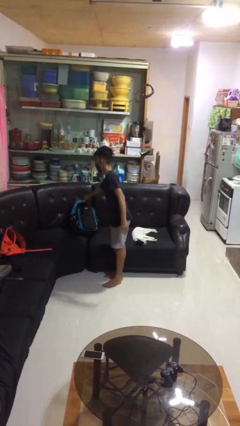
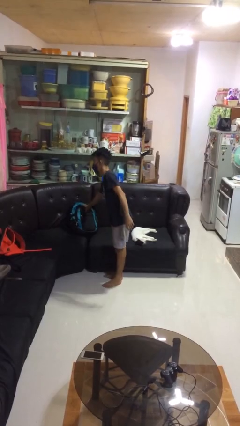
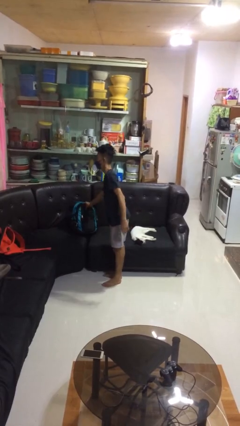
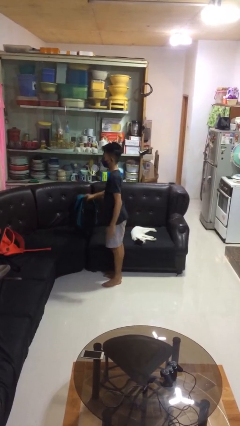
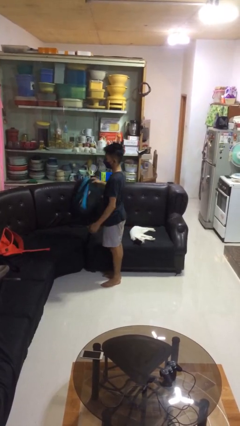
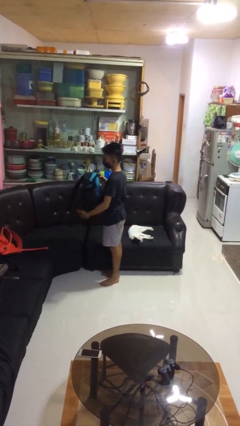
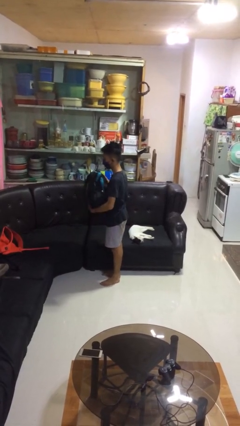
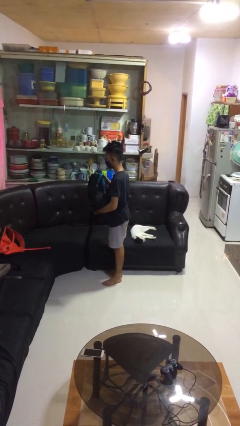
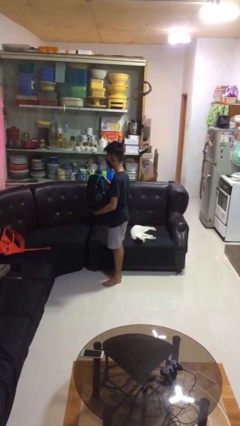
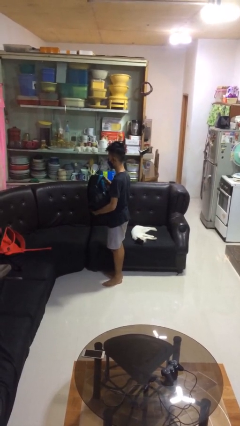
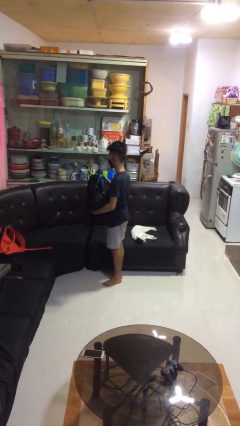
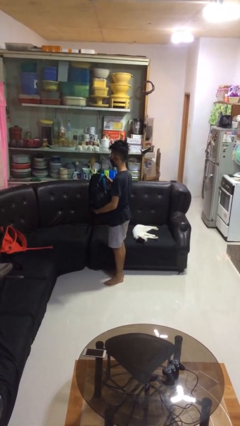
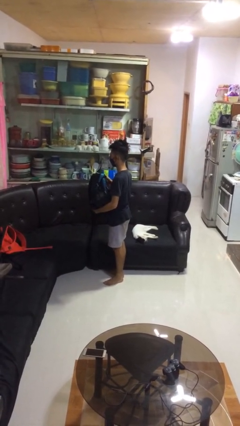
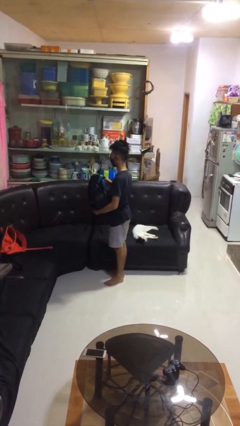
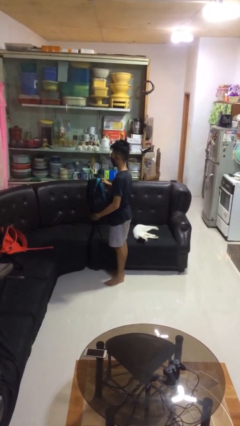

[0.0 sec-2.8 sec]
person picks up object from couch

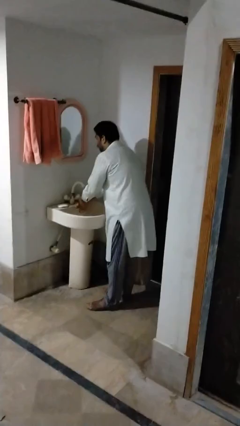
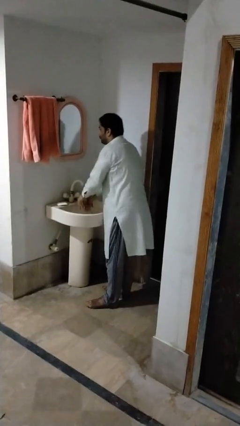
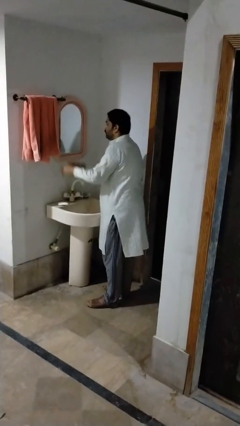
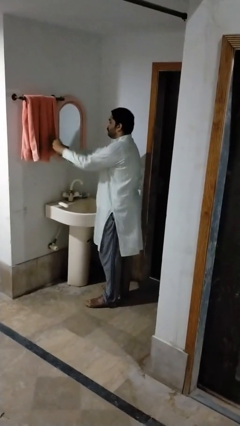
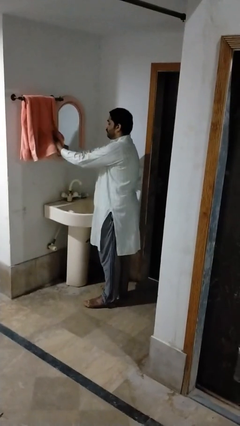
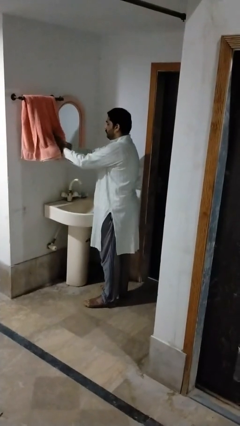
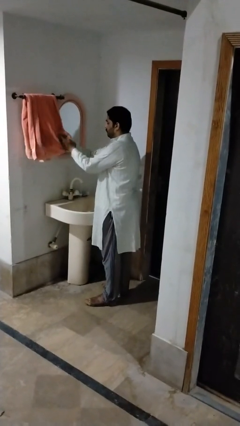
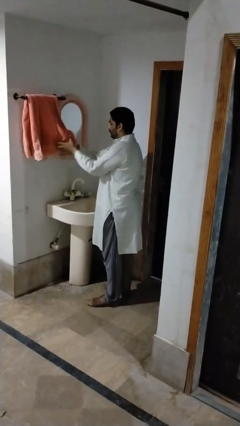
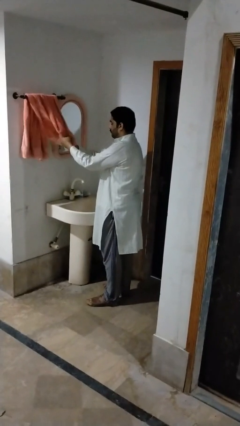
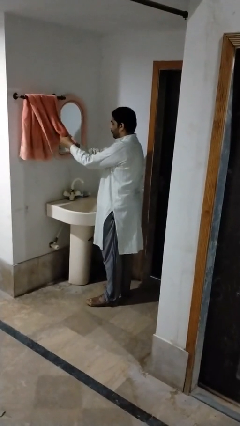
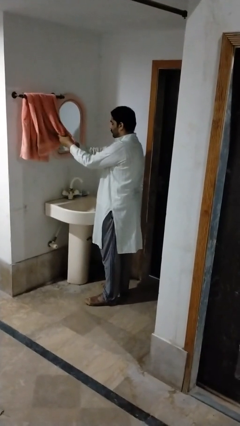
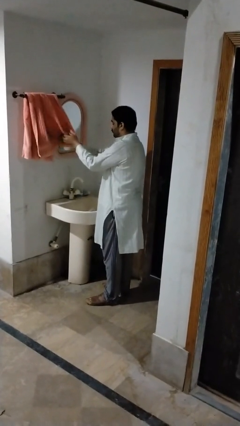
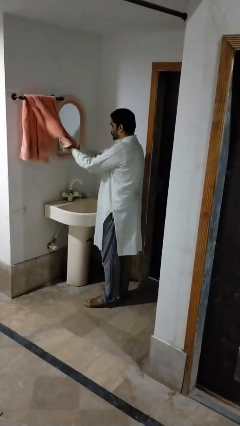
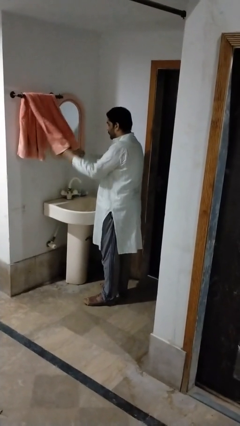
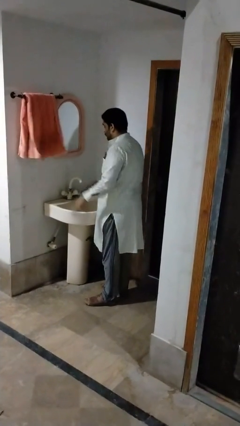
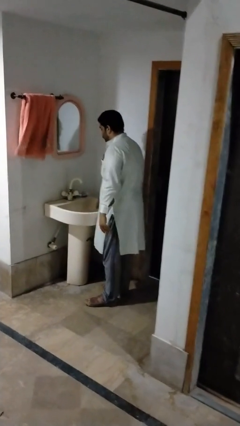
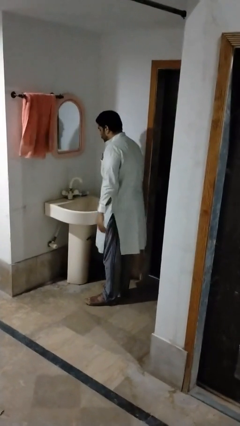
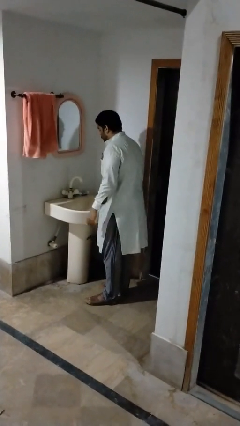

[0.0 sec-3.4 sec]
person dries hands with towel

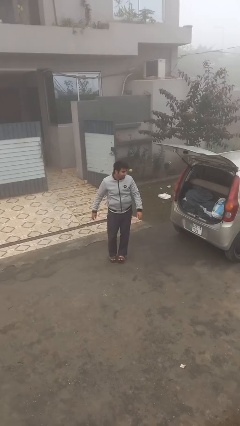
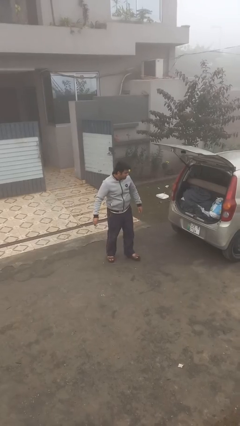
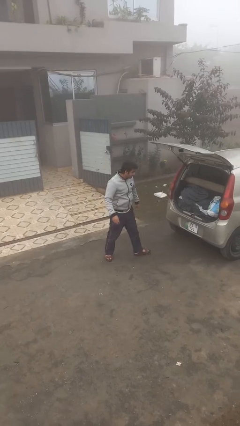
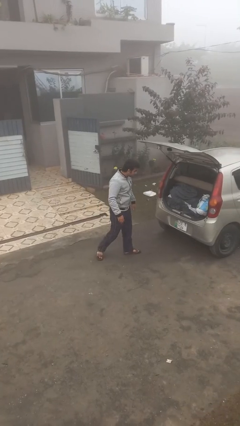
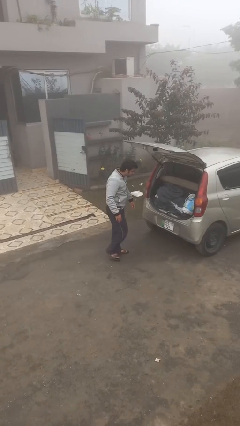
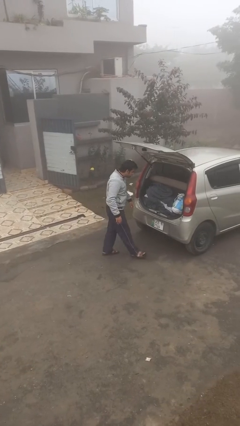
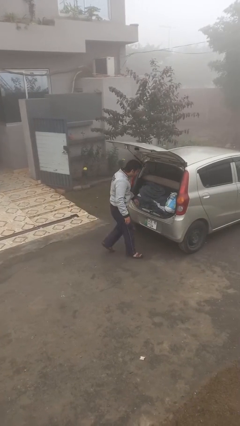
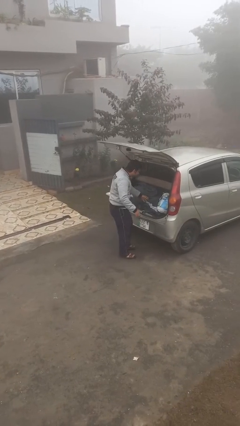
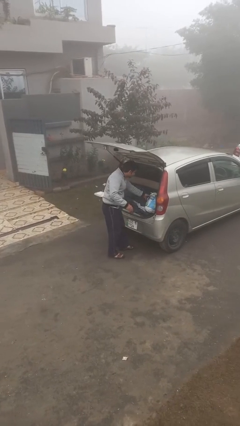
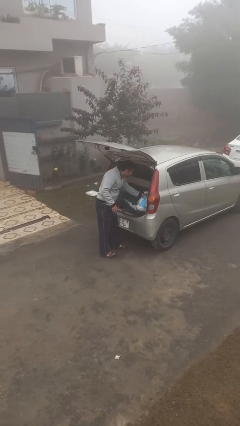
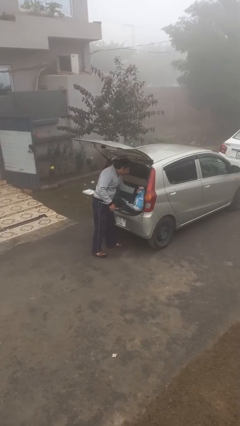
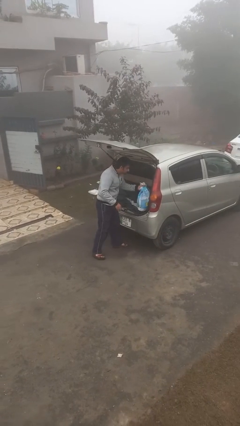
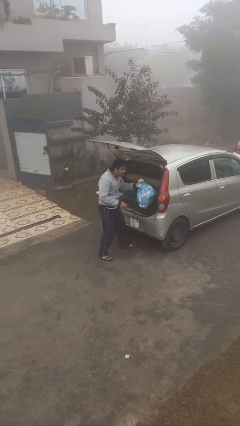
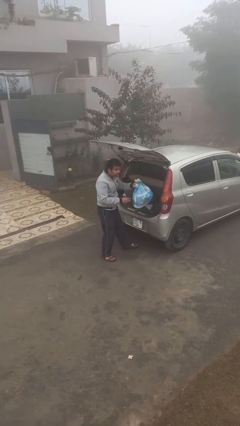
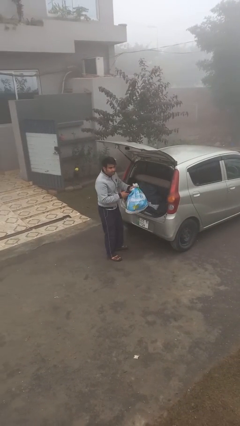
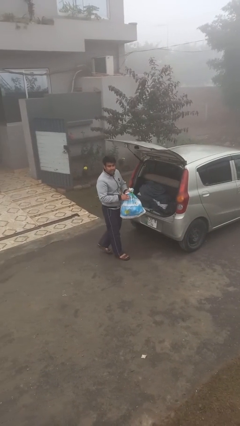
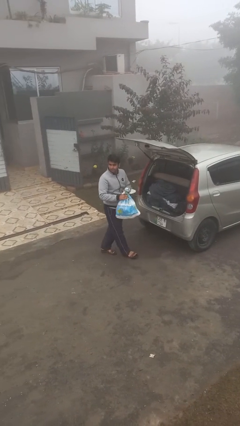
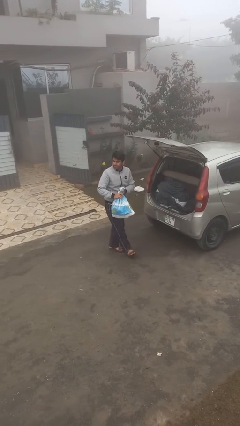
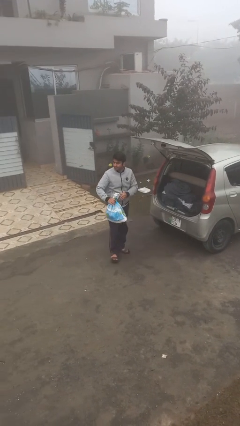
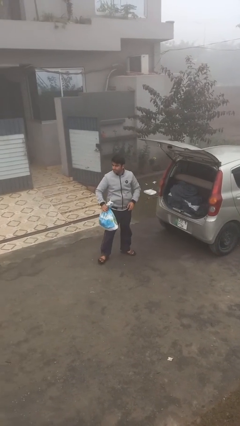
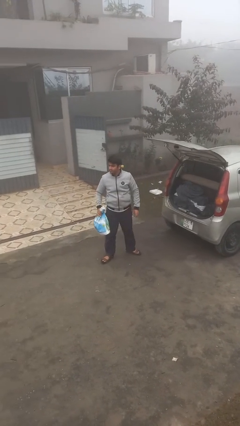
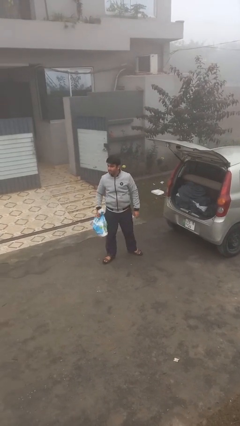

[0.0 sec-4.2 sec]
person unloads car

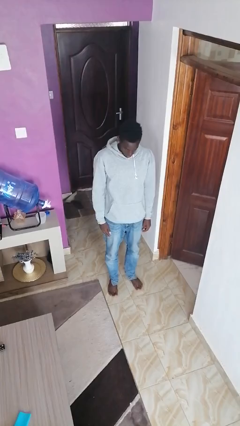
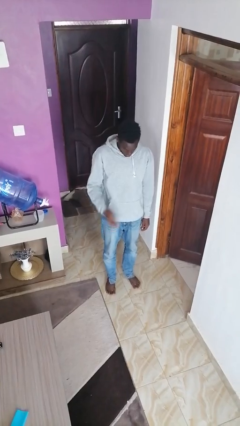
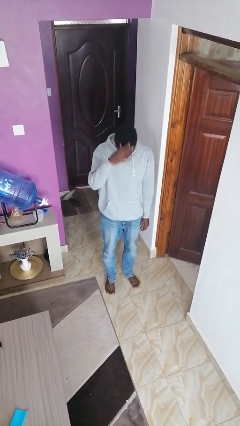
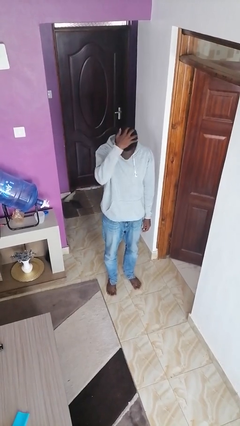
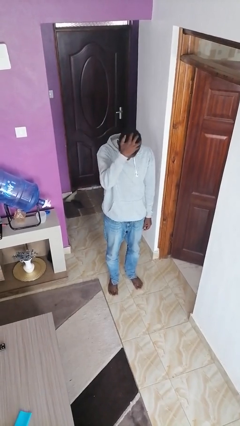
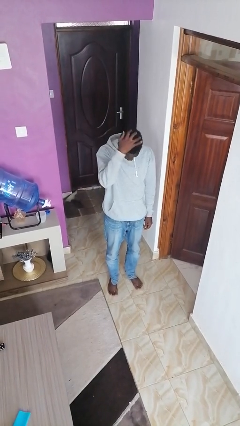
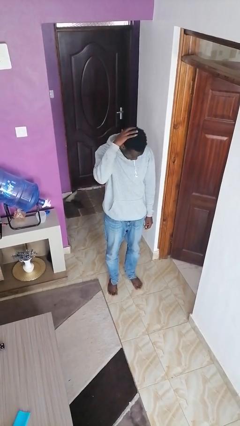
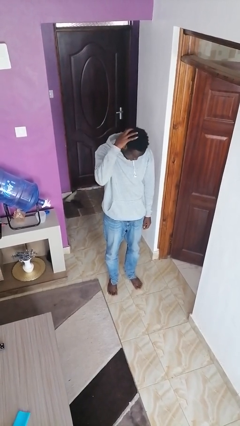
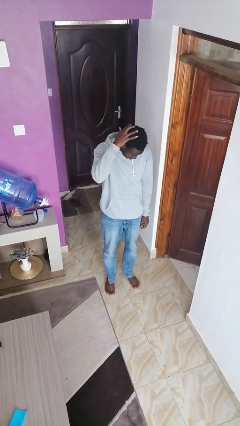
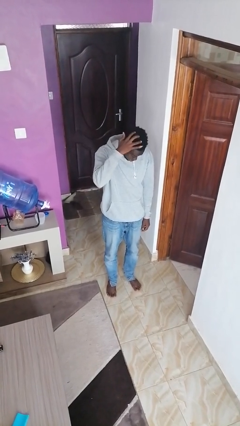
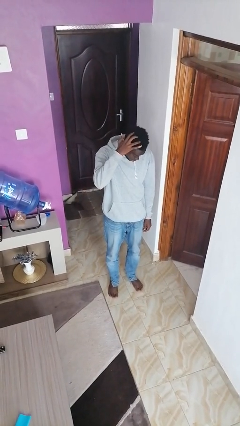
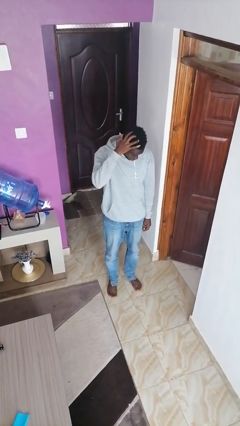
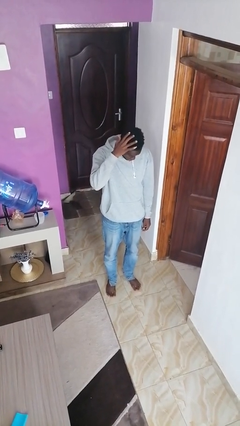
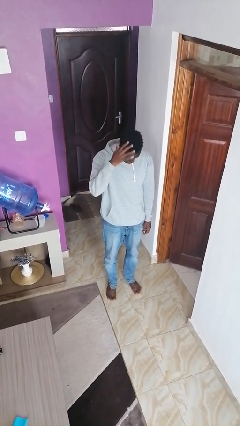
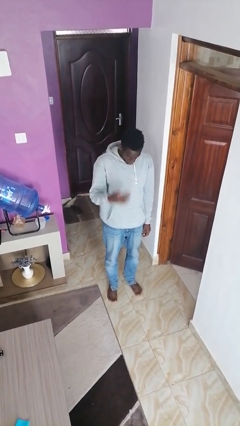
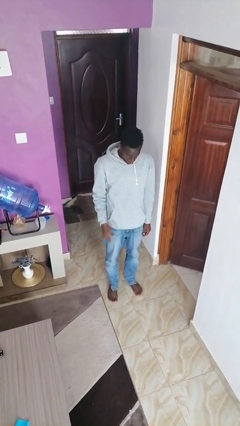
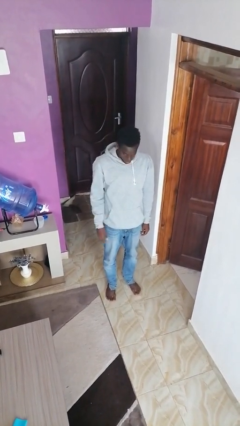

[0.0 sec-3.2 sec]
person strokes hair

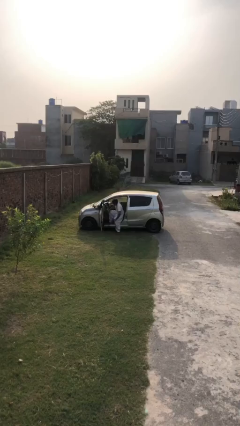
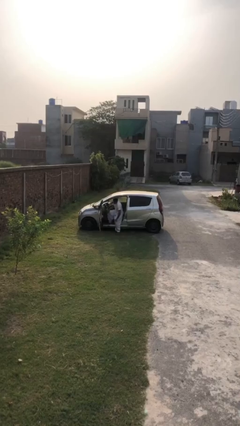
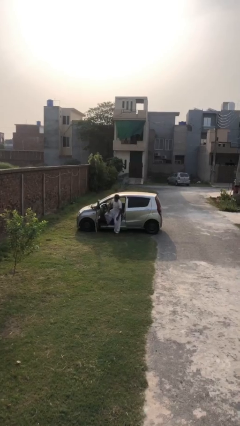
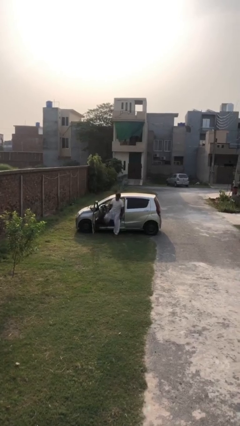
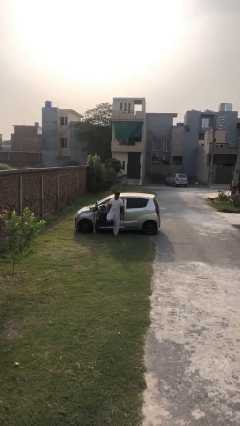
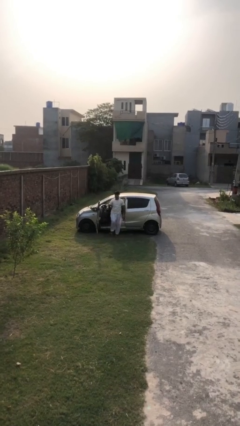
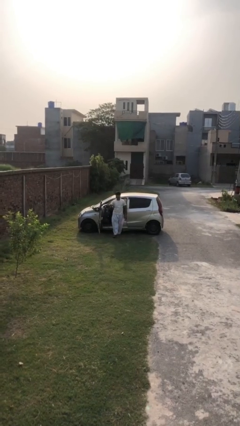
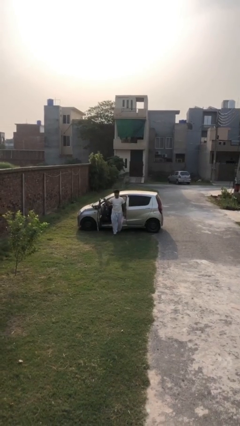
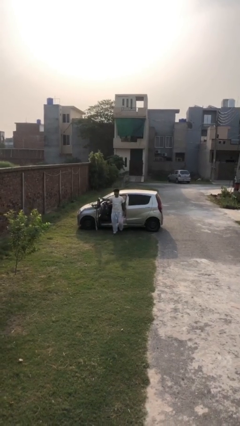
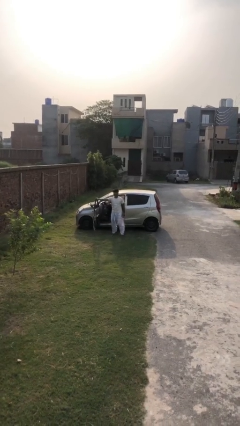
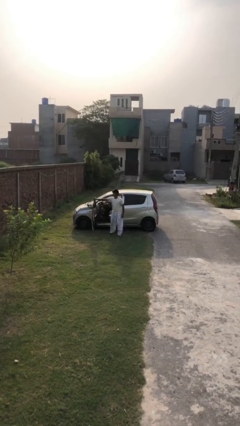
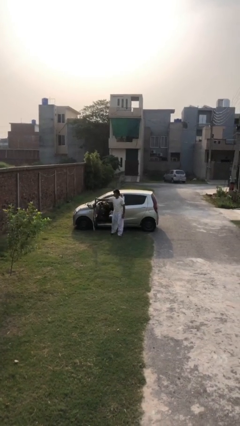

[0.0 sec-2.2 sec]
person exits car

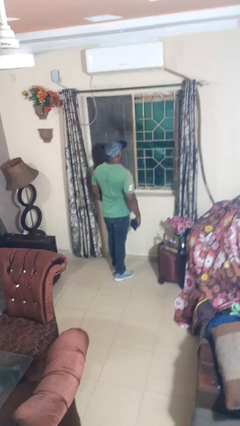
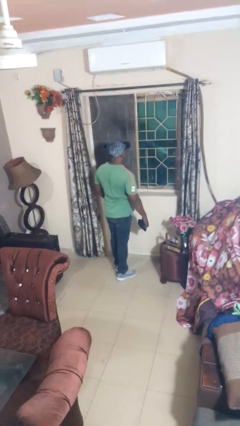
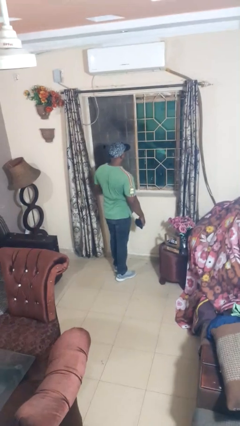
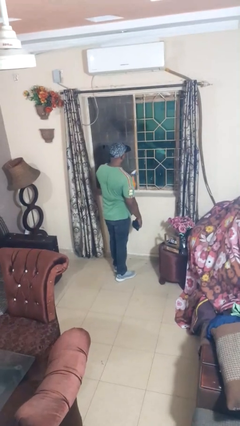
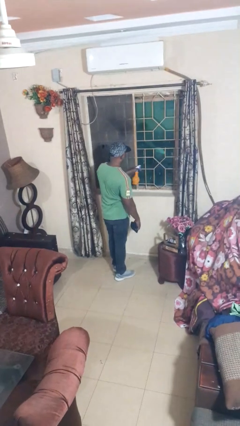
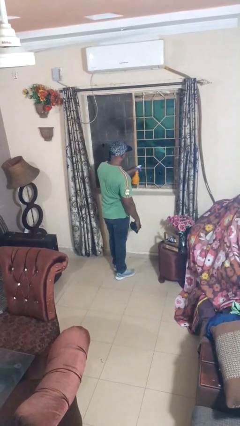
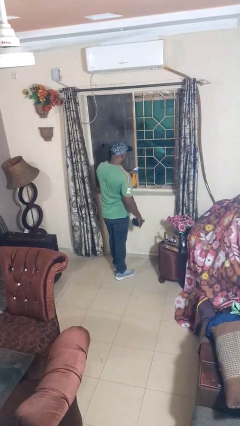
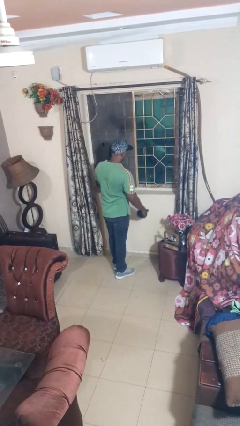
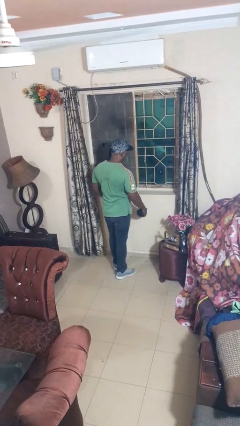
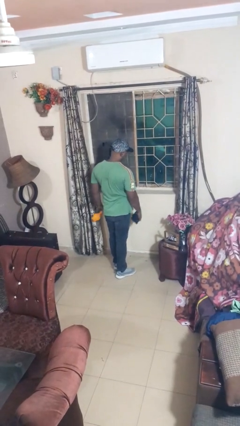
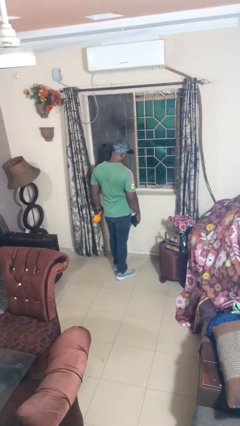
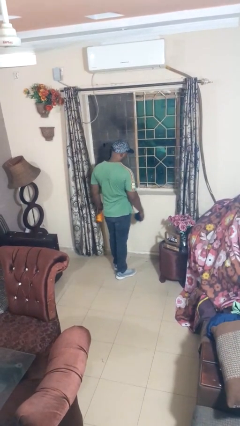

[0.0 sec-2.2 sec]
person sprays from bottle
